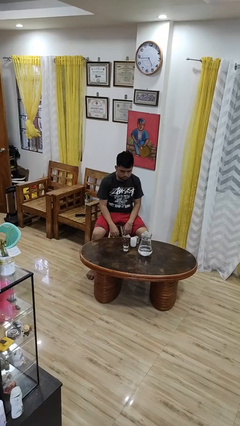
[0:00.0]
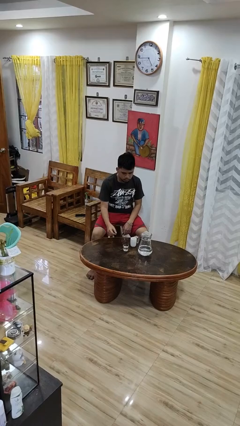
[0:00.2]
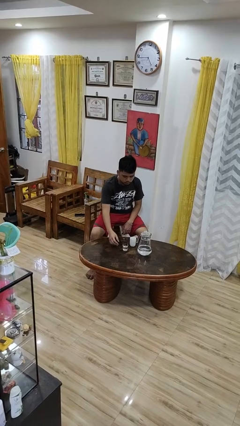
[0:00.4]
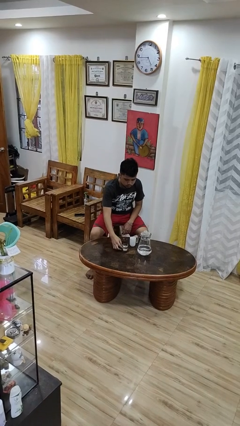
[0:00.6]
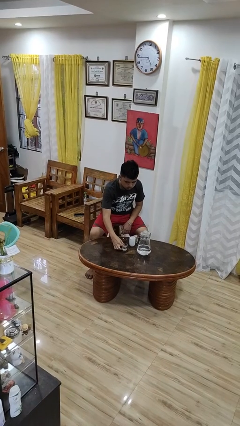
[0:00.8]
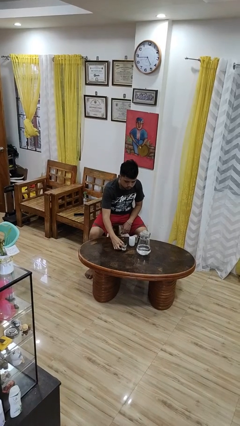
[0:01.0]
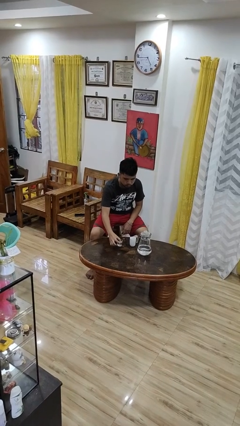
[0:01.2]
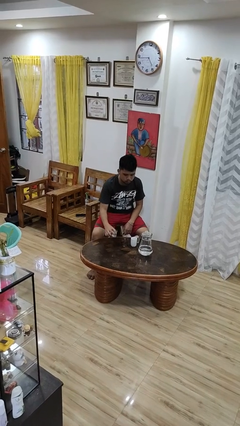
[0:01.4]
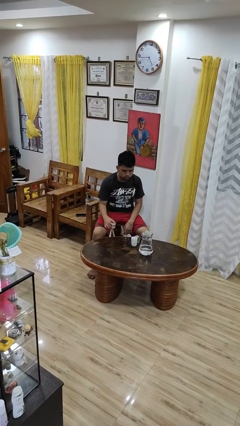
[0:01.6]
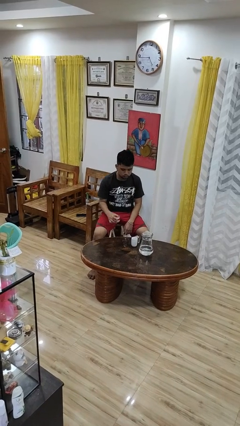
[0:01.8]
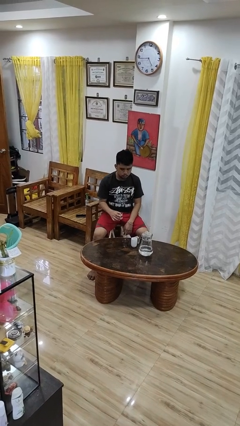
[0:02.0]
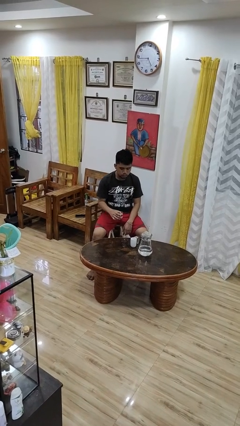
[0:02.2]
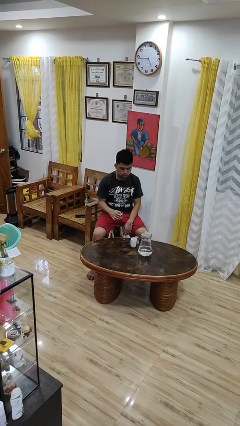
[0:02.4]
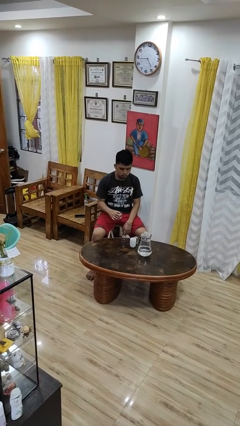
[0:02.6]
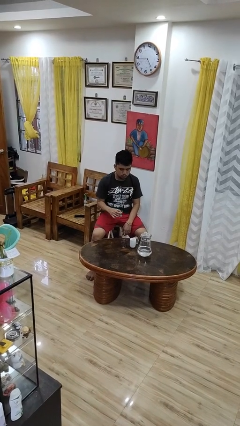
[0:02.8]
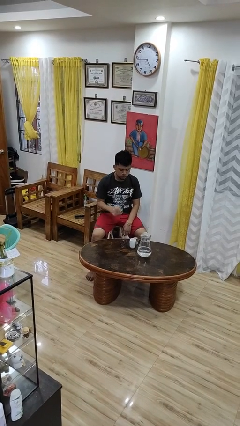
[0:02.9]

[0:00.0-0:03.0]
person picks up object from table

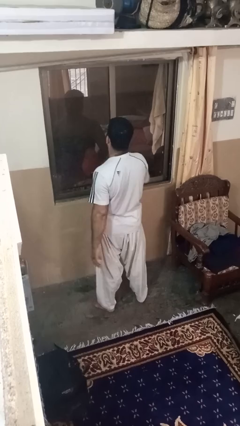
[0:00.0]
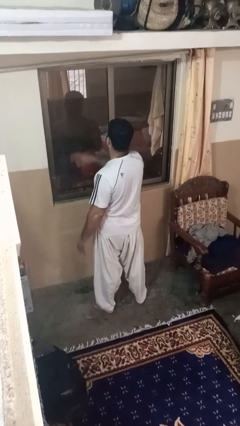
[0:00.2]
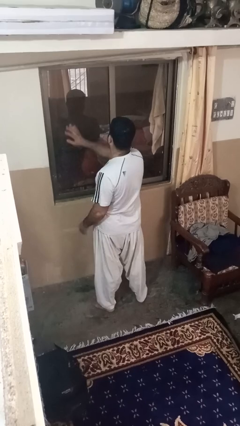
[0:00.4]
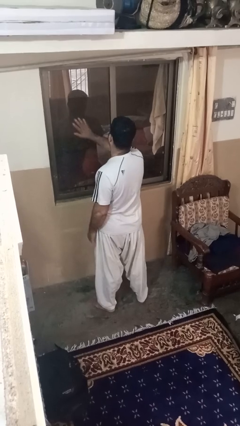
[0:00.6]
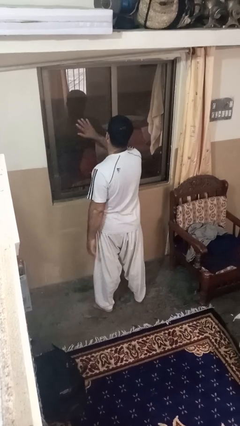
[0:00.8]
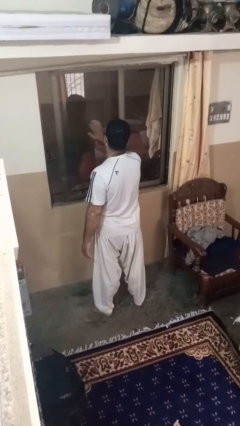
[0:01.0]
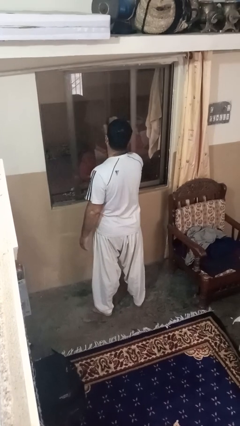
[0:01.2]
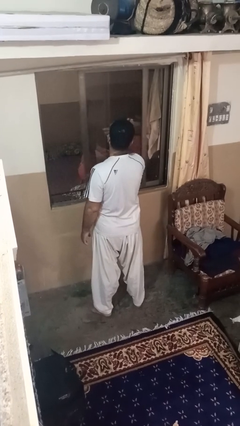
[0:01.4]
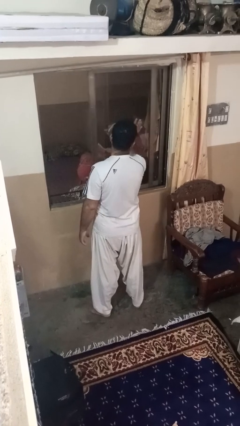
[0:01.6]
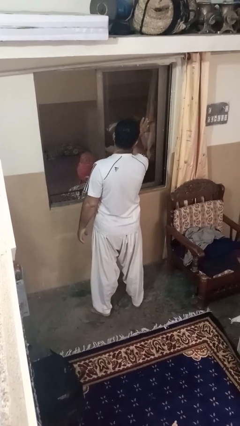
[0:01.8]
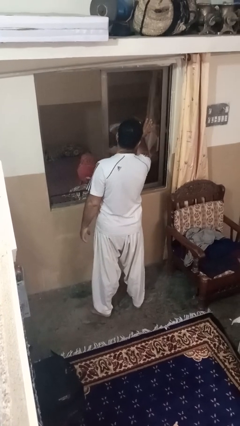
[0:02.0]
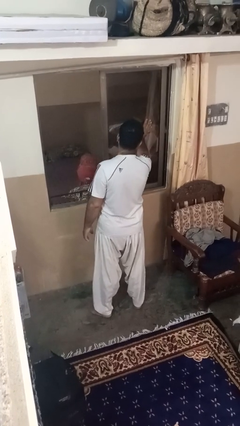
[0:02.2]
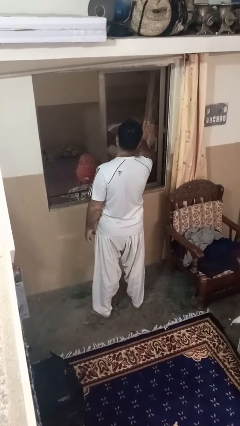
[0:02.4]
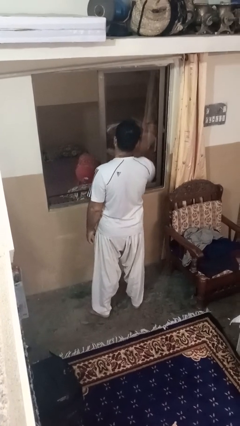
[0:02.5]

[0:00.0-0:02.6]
person opens home window

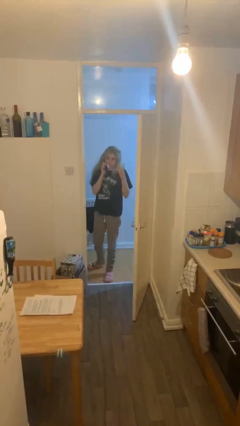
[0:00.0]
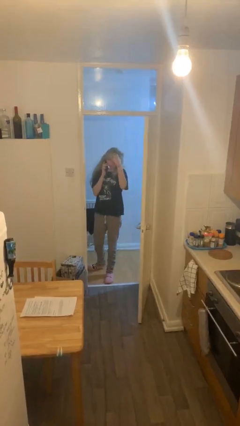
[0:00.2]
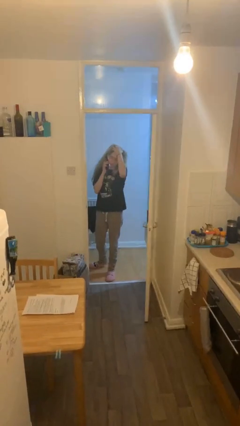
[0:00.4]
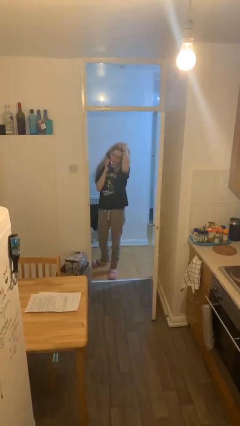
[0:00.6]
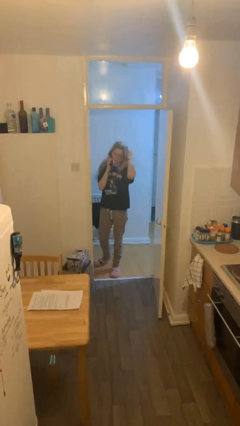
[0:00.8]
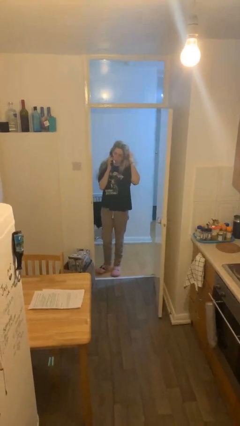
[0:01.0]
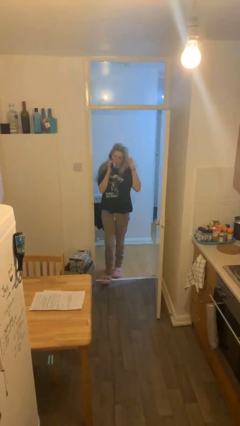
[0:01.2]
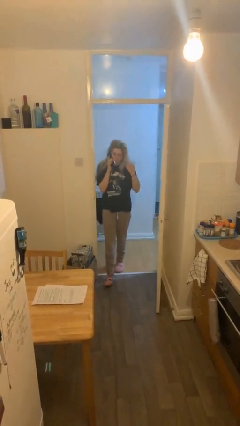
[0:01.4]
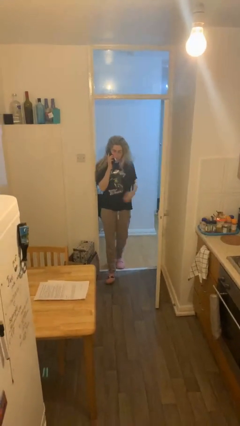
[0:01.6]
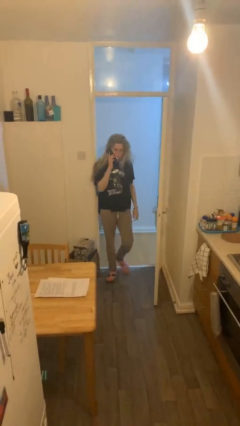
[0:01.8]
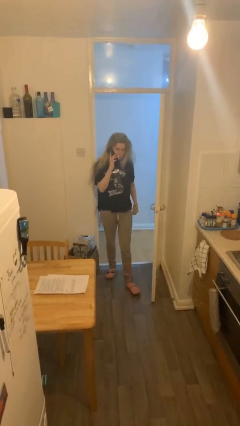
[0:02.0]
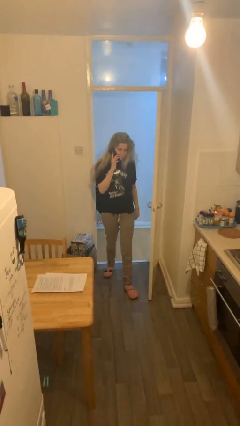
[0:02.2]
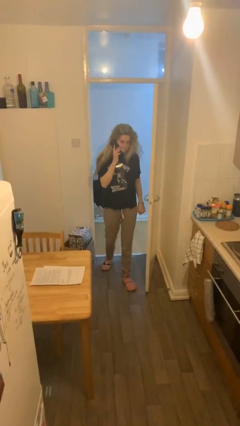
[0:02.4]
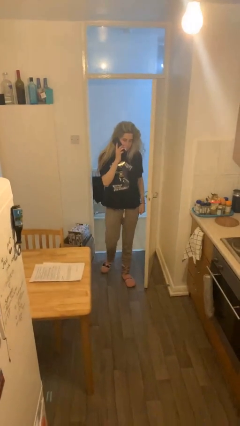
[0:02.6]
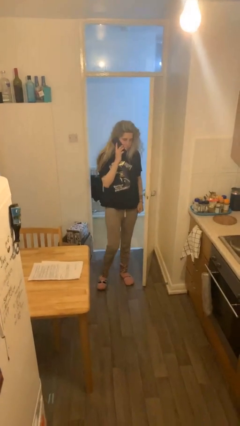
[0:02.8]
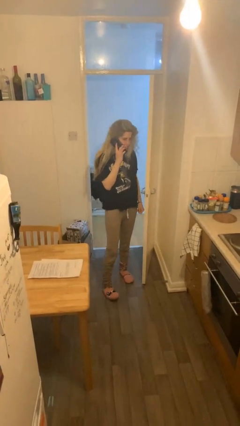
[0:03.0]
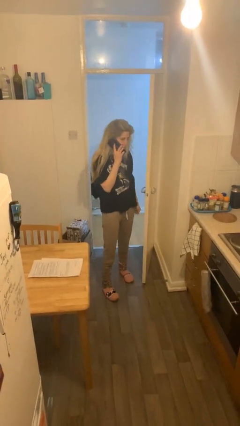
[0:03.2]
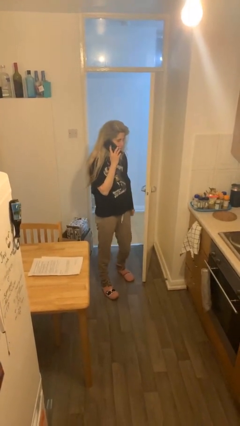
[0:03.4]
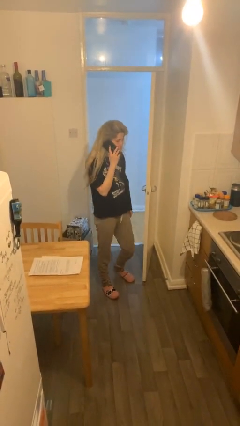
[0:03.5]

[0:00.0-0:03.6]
person enters scene through structure

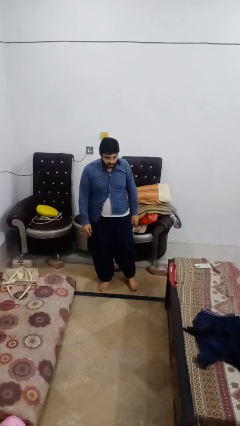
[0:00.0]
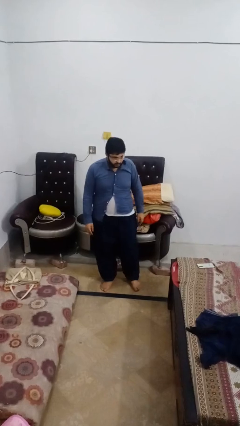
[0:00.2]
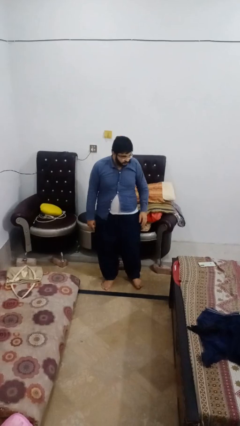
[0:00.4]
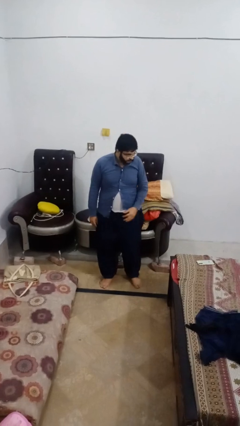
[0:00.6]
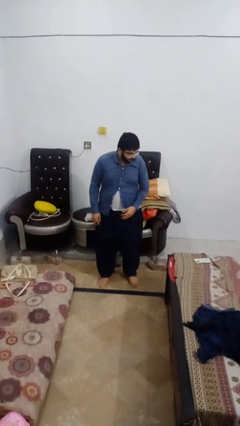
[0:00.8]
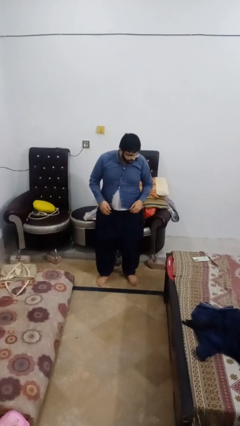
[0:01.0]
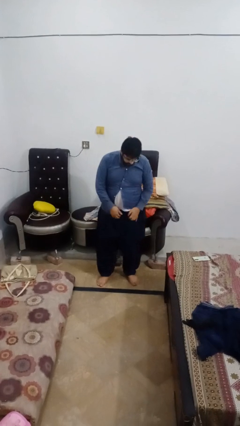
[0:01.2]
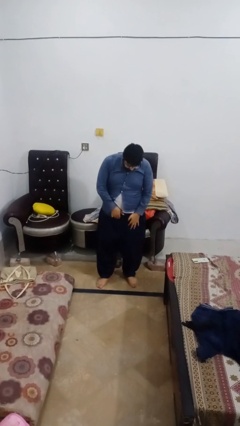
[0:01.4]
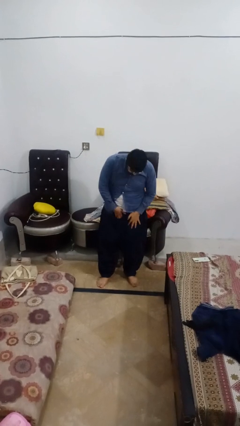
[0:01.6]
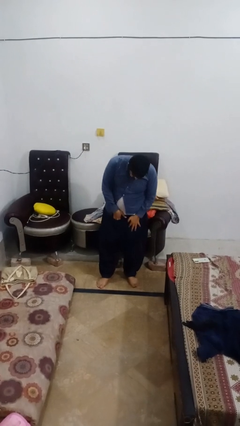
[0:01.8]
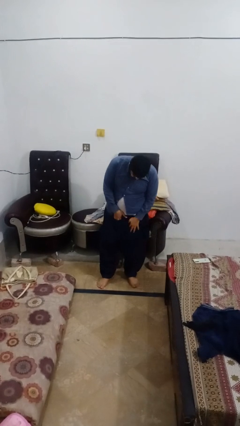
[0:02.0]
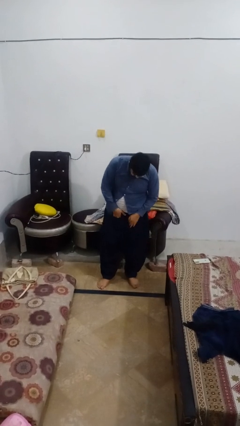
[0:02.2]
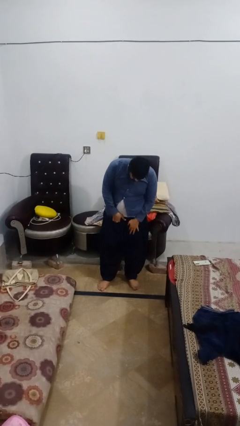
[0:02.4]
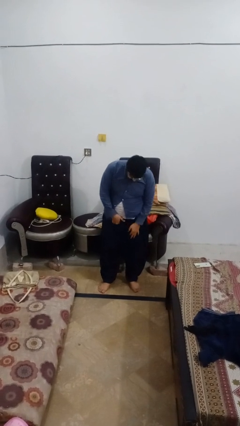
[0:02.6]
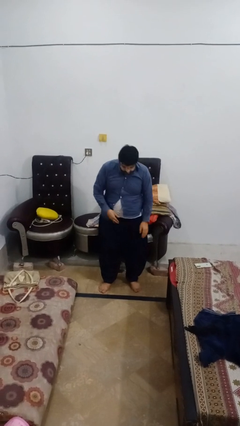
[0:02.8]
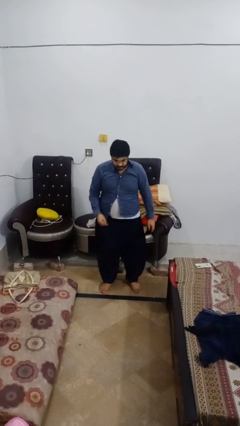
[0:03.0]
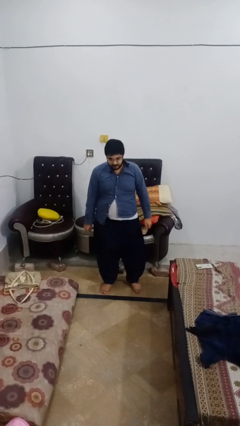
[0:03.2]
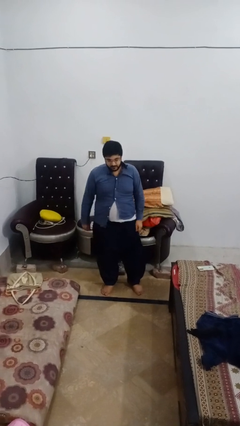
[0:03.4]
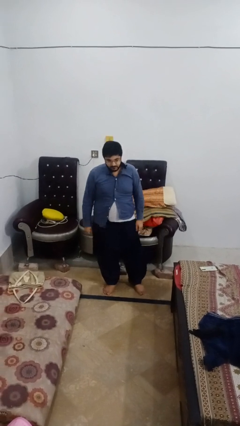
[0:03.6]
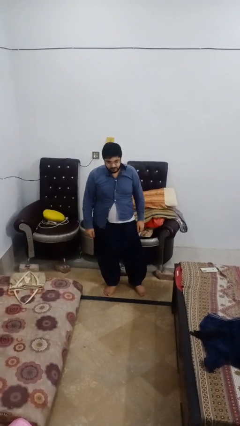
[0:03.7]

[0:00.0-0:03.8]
person puts hands in back pockets

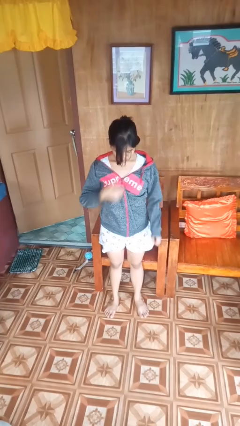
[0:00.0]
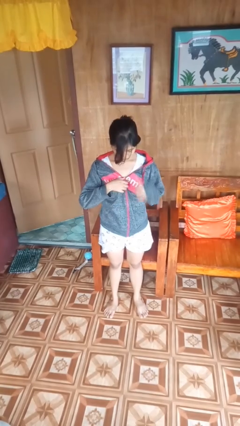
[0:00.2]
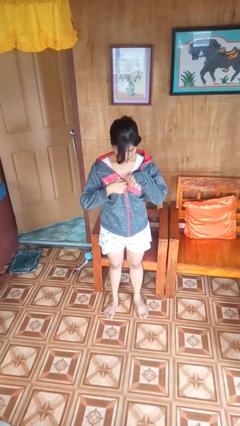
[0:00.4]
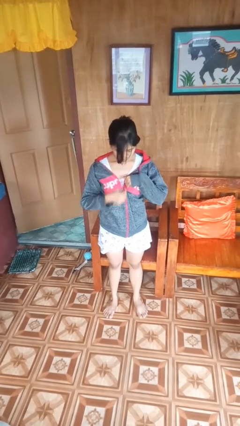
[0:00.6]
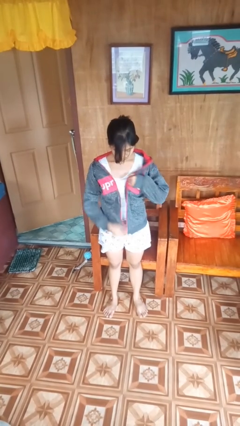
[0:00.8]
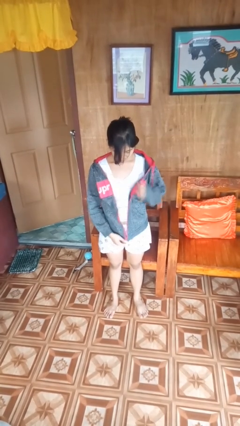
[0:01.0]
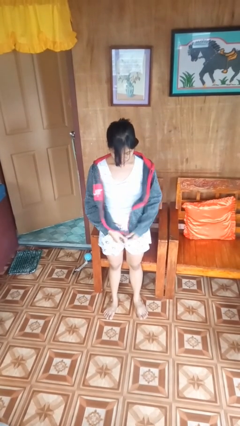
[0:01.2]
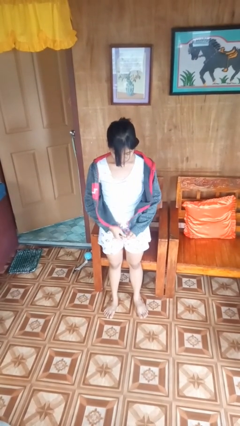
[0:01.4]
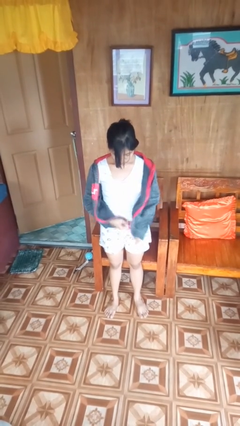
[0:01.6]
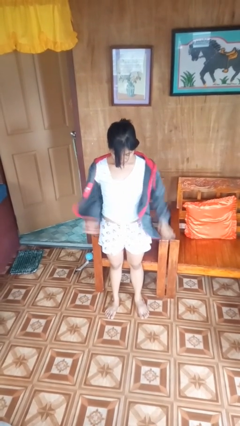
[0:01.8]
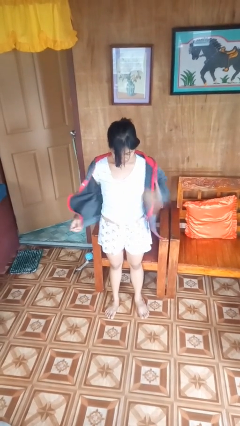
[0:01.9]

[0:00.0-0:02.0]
person unzips jacket

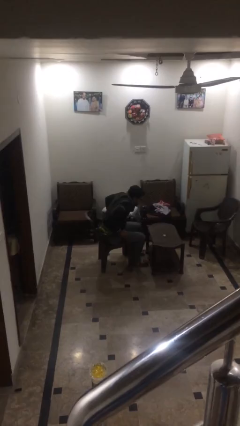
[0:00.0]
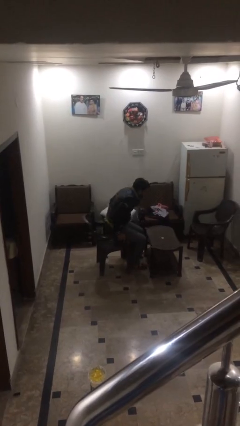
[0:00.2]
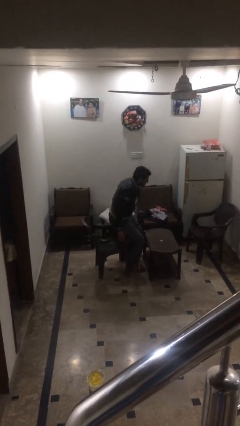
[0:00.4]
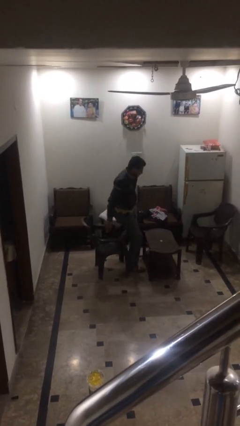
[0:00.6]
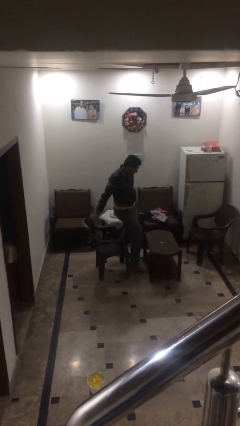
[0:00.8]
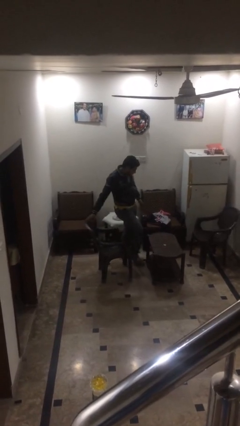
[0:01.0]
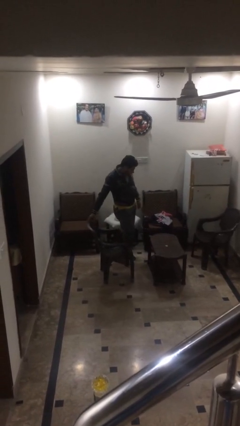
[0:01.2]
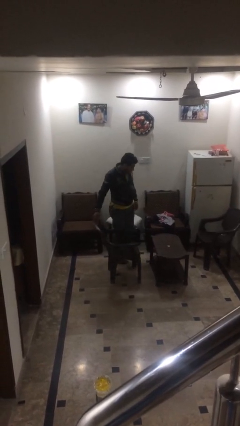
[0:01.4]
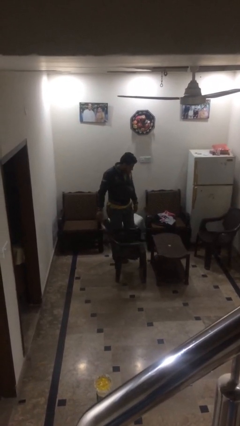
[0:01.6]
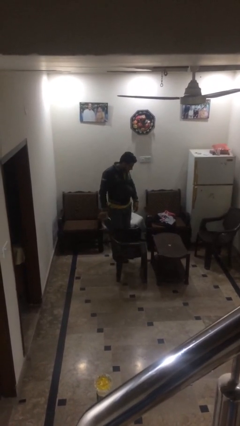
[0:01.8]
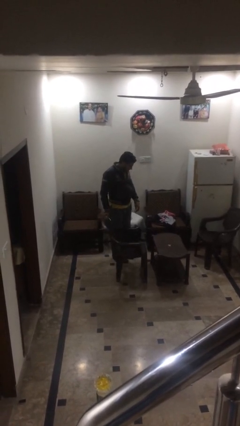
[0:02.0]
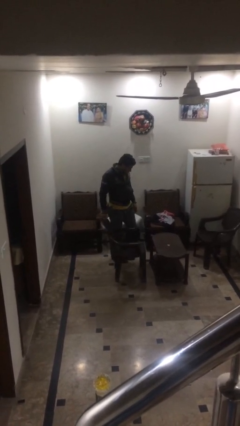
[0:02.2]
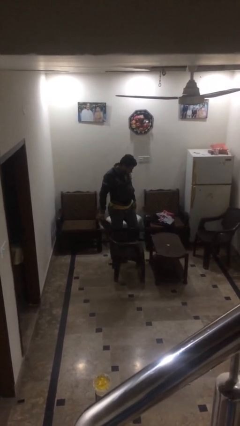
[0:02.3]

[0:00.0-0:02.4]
person stands up

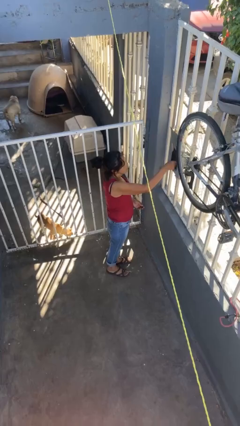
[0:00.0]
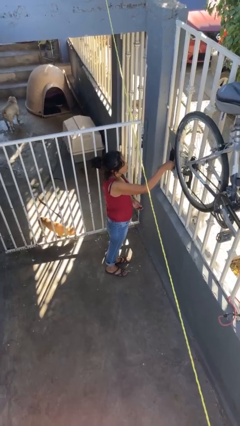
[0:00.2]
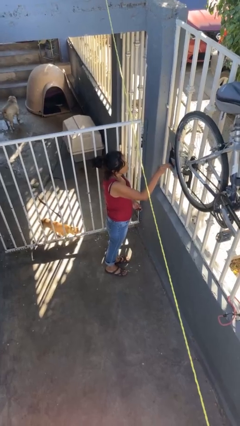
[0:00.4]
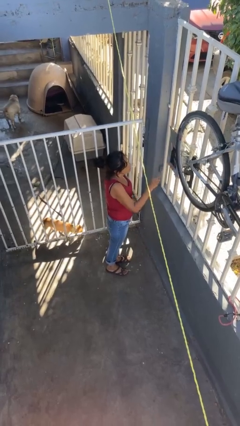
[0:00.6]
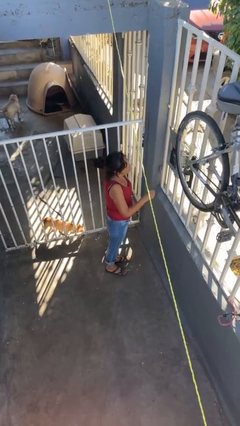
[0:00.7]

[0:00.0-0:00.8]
person puts letters in mailbox
